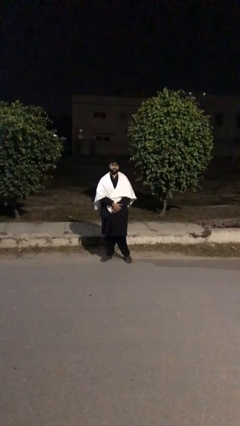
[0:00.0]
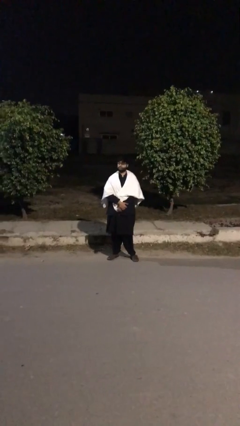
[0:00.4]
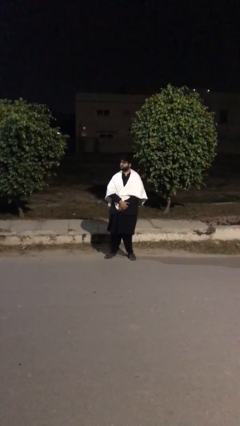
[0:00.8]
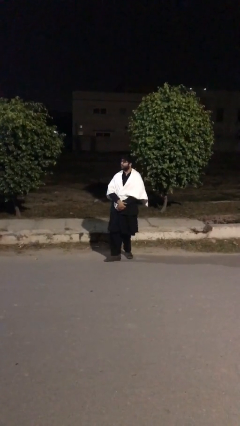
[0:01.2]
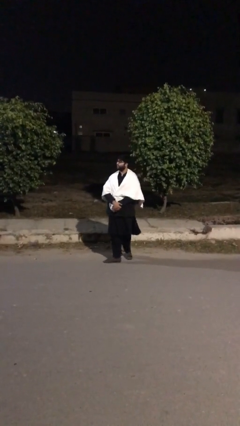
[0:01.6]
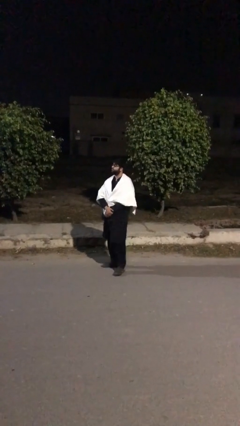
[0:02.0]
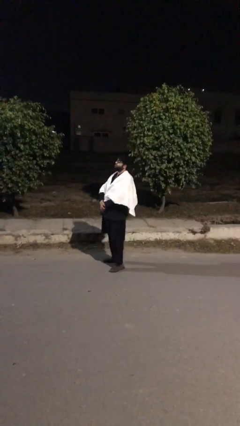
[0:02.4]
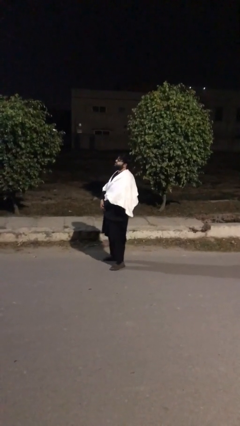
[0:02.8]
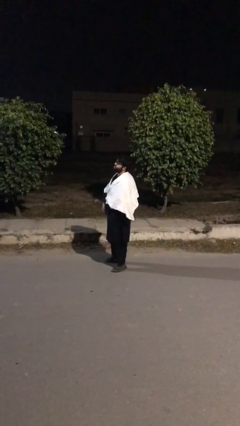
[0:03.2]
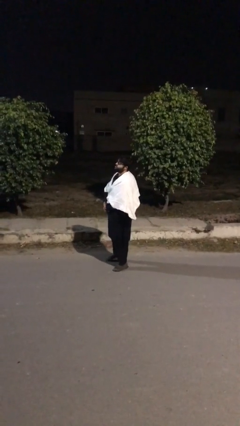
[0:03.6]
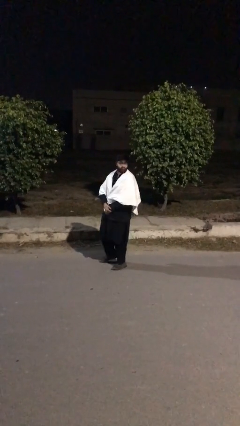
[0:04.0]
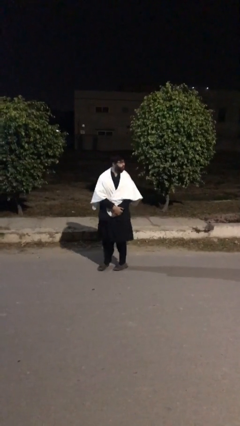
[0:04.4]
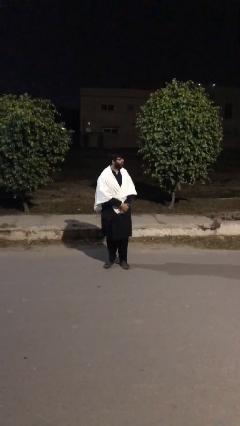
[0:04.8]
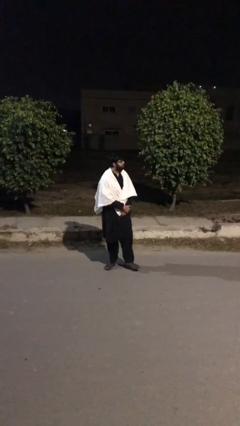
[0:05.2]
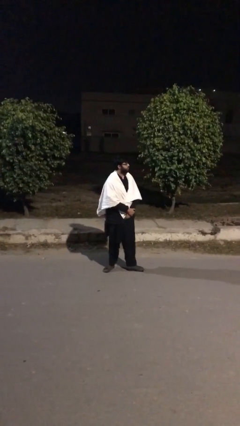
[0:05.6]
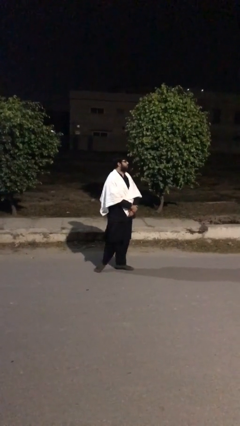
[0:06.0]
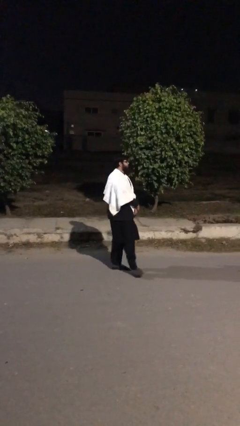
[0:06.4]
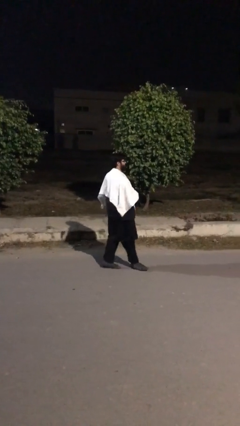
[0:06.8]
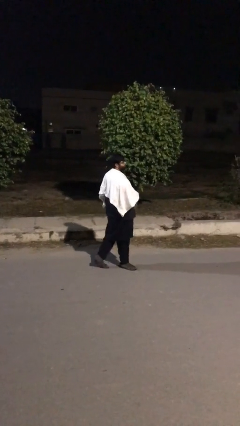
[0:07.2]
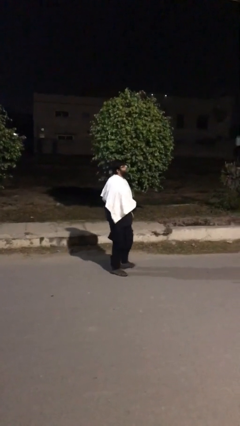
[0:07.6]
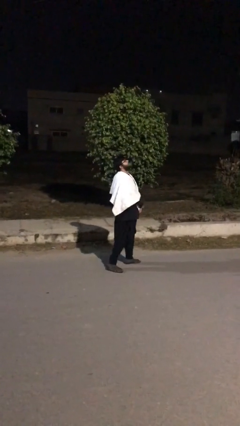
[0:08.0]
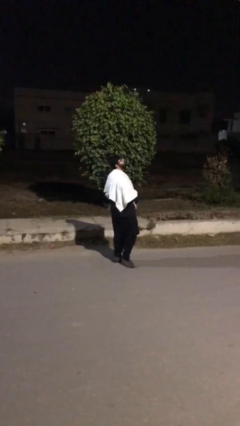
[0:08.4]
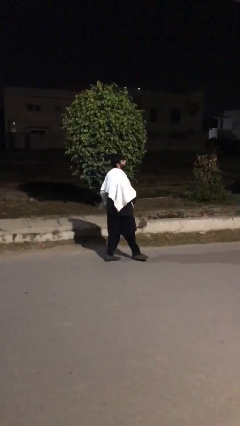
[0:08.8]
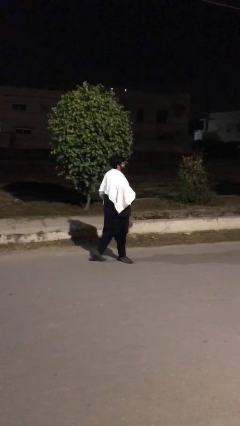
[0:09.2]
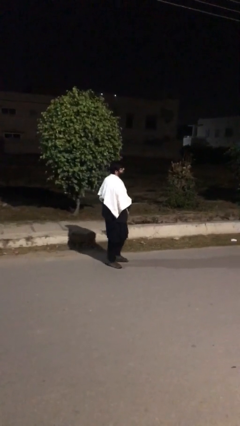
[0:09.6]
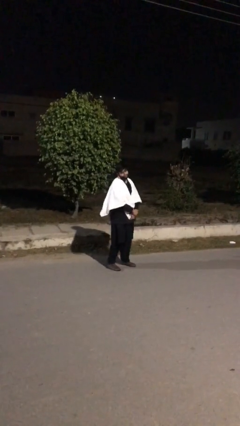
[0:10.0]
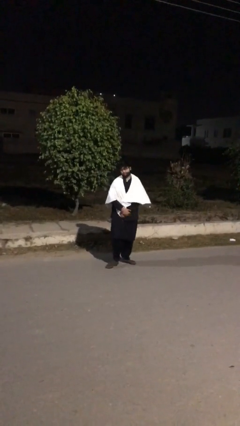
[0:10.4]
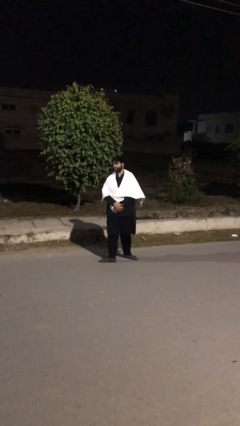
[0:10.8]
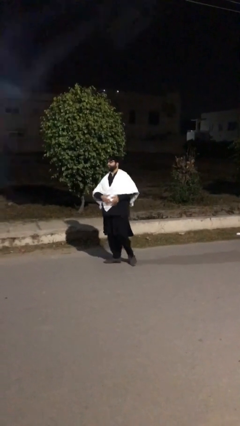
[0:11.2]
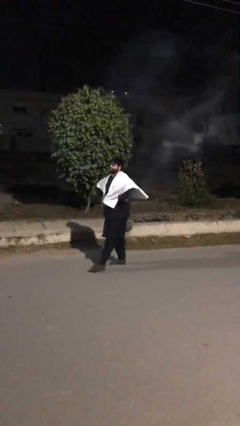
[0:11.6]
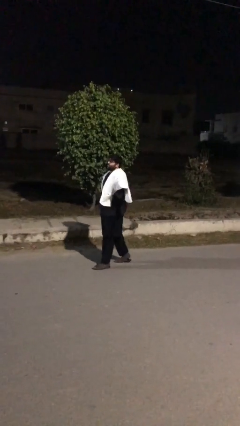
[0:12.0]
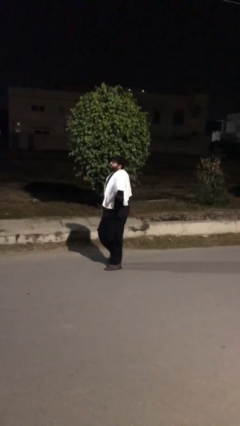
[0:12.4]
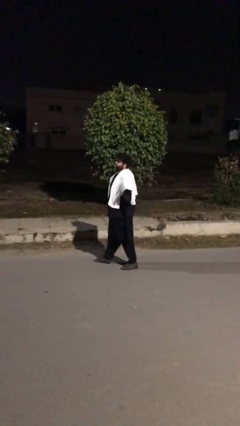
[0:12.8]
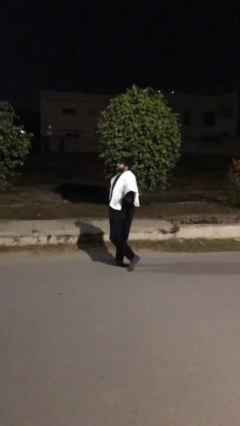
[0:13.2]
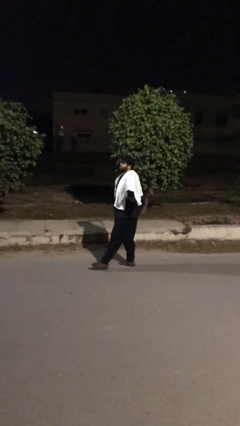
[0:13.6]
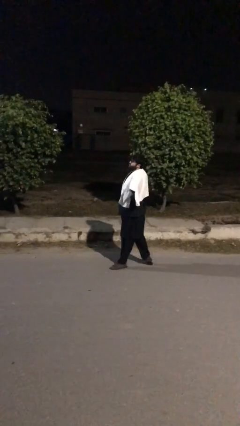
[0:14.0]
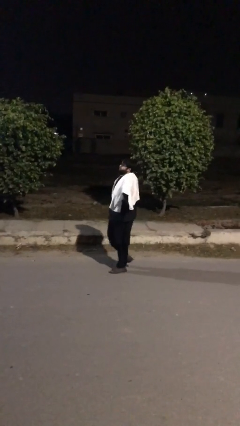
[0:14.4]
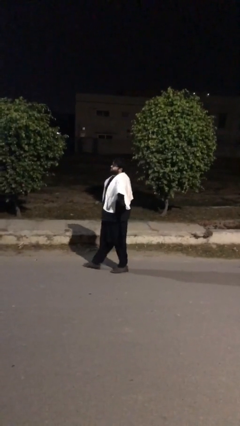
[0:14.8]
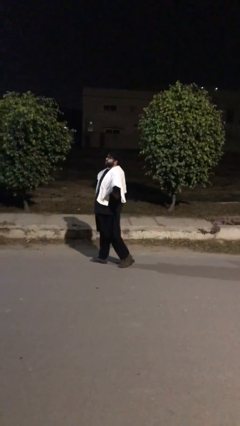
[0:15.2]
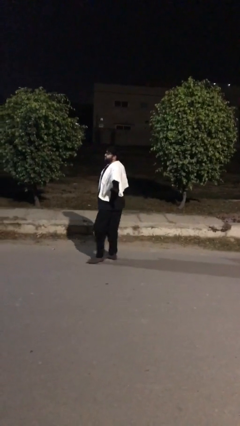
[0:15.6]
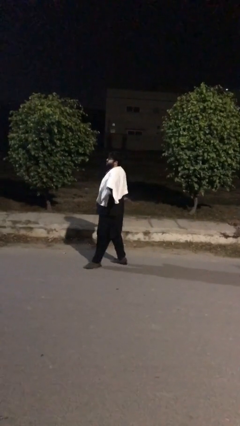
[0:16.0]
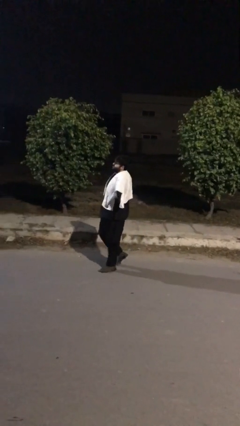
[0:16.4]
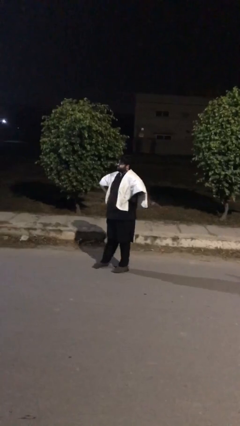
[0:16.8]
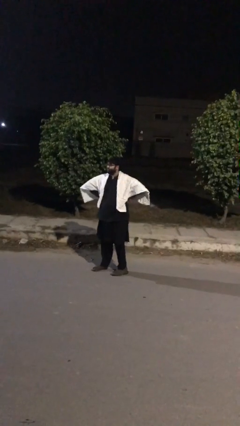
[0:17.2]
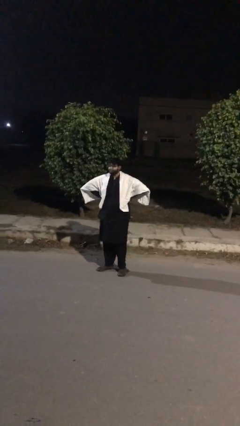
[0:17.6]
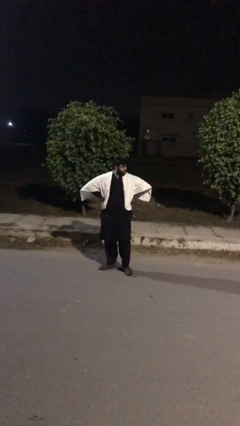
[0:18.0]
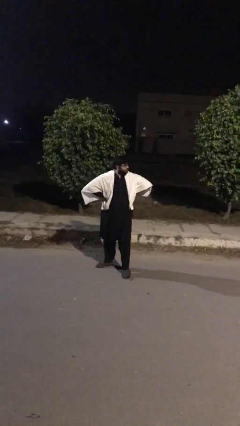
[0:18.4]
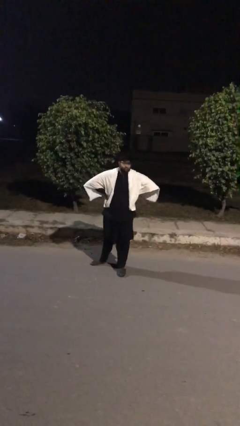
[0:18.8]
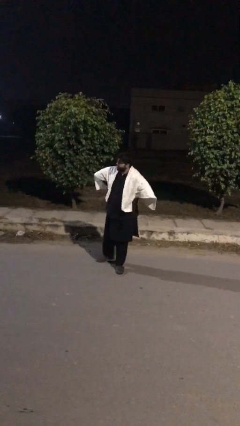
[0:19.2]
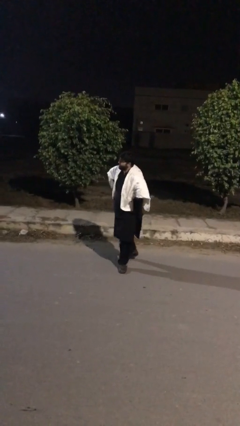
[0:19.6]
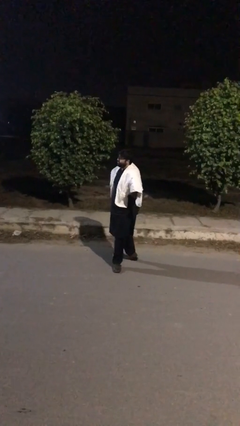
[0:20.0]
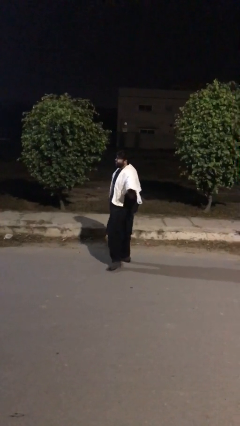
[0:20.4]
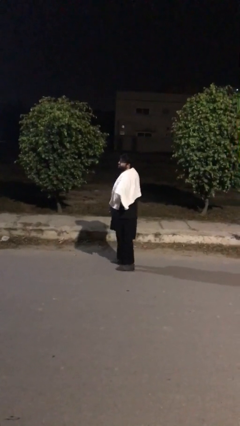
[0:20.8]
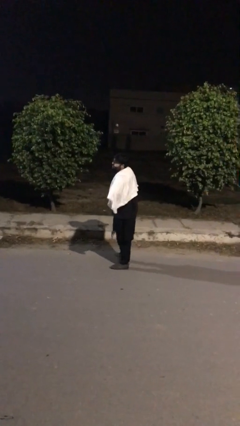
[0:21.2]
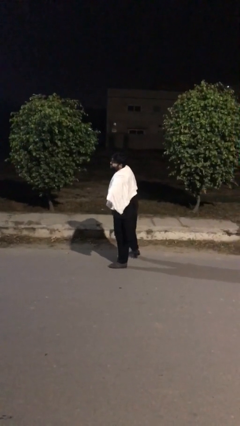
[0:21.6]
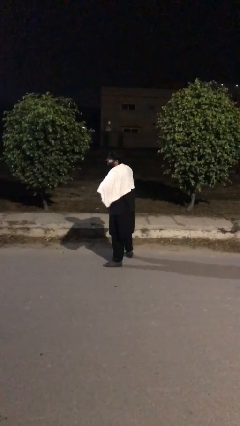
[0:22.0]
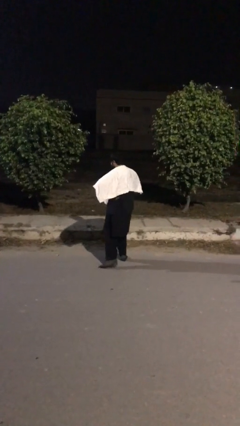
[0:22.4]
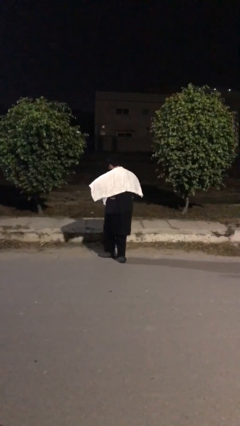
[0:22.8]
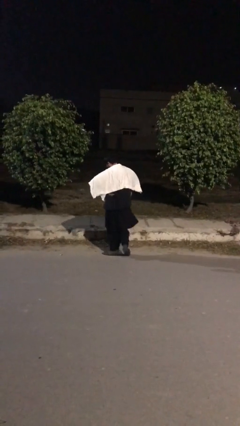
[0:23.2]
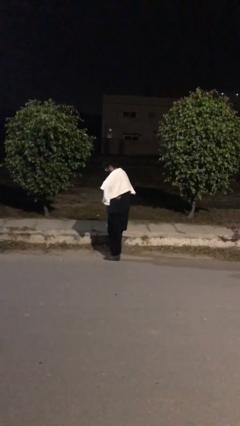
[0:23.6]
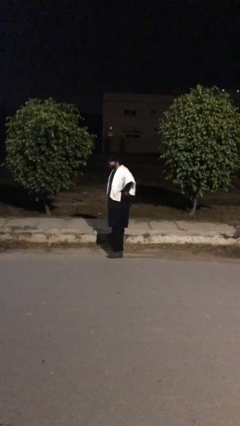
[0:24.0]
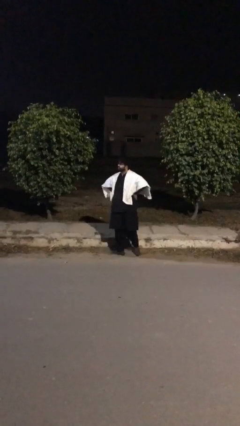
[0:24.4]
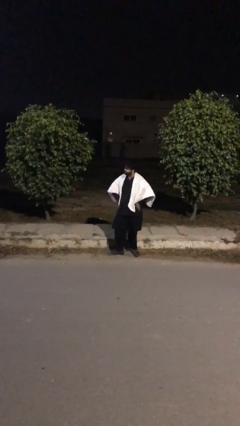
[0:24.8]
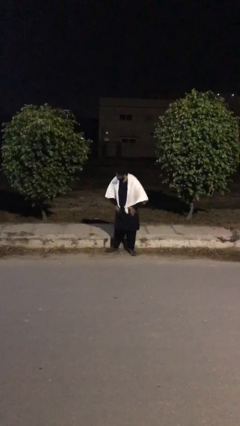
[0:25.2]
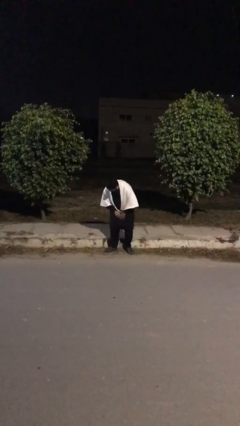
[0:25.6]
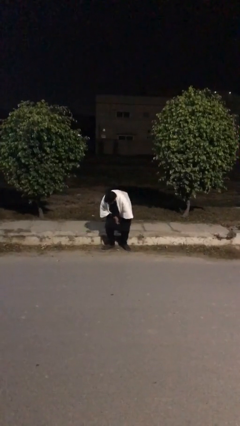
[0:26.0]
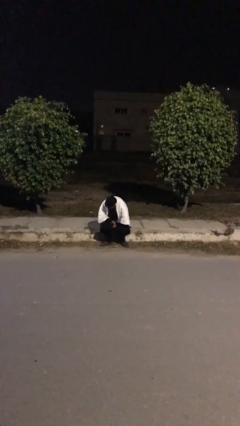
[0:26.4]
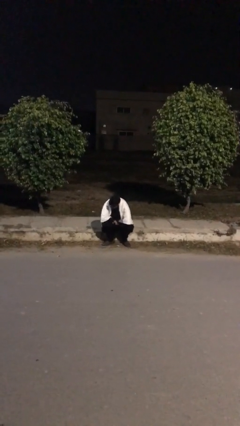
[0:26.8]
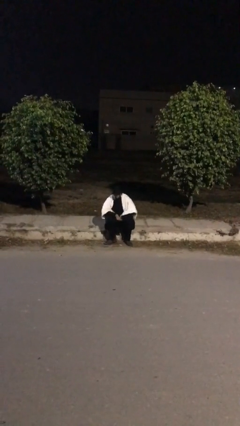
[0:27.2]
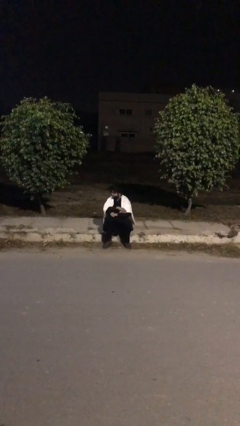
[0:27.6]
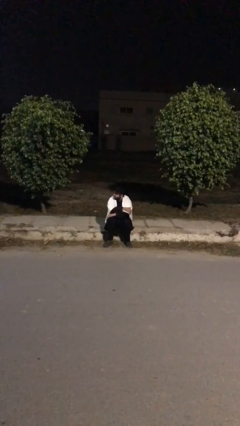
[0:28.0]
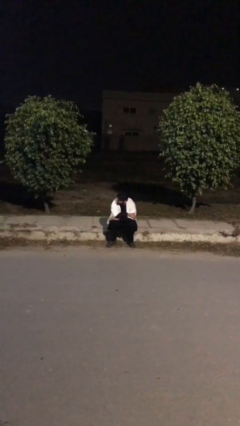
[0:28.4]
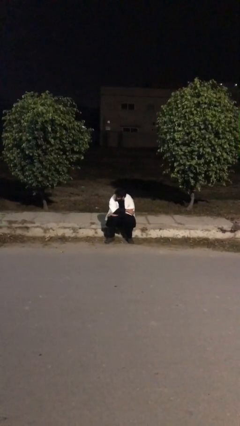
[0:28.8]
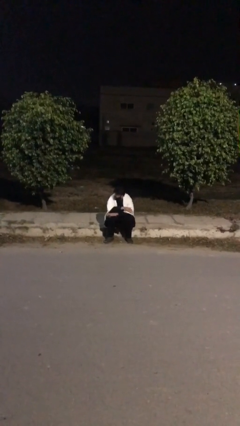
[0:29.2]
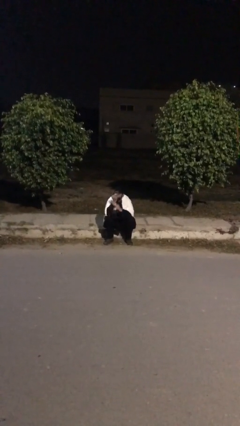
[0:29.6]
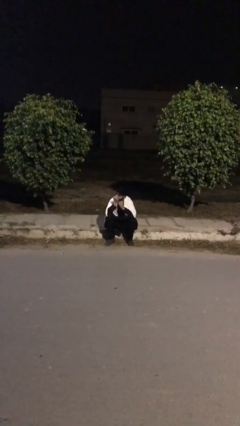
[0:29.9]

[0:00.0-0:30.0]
person walks

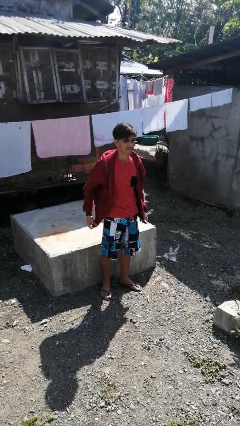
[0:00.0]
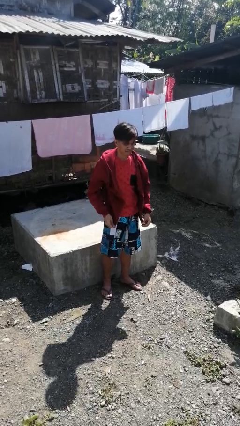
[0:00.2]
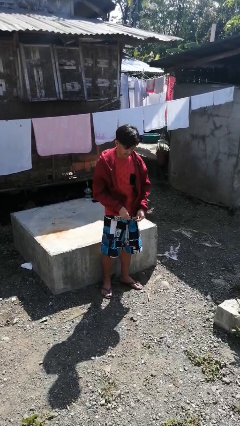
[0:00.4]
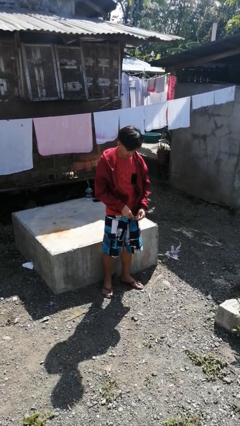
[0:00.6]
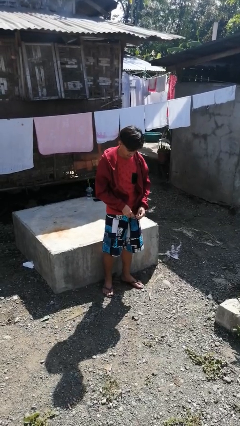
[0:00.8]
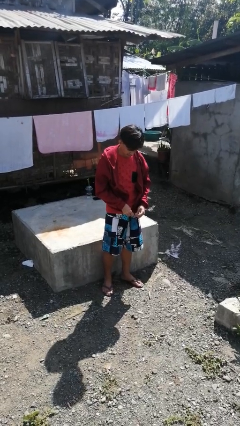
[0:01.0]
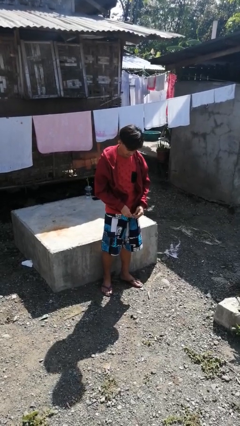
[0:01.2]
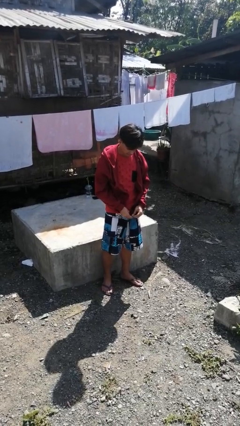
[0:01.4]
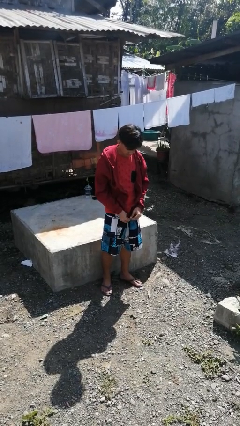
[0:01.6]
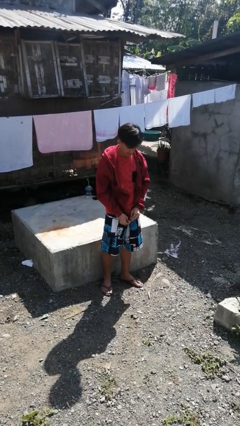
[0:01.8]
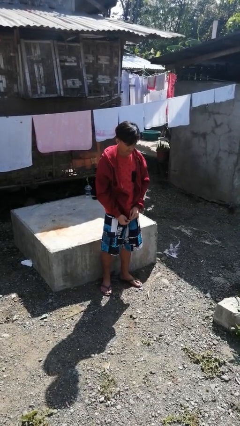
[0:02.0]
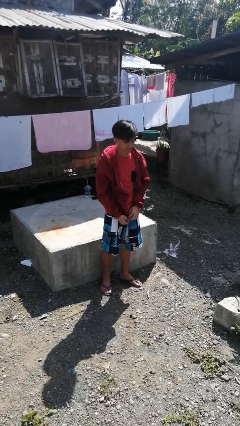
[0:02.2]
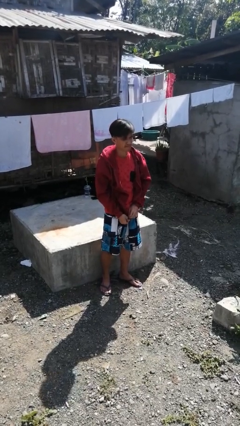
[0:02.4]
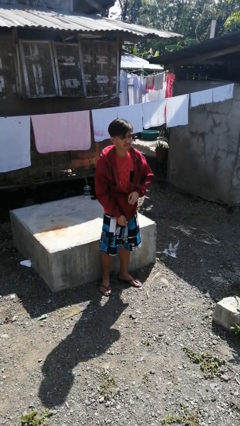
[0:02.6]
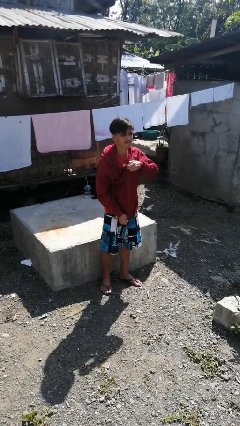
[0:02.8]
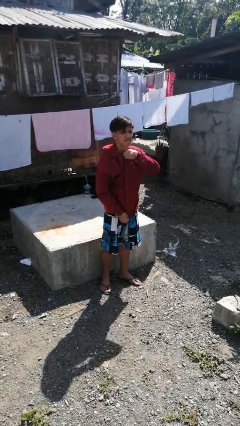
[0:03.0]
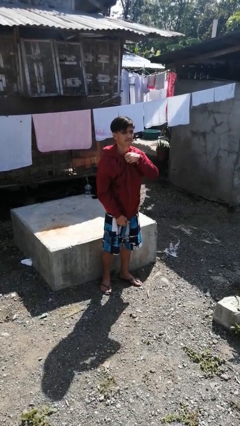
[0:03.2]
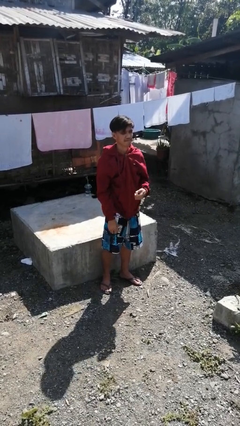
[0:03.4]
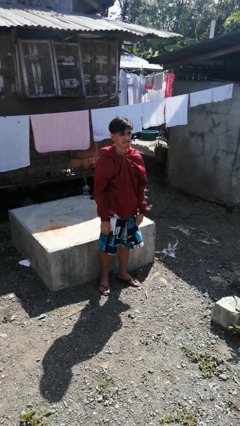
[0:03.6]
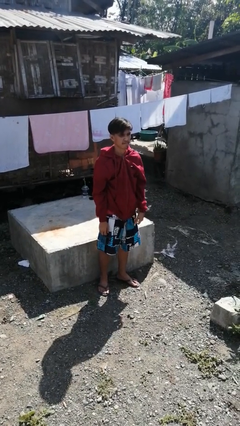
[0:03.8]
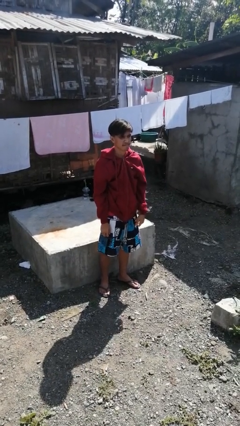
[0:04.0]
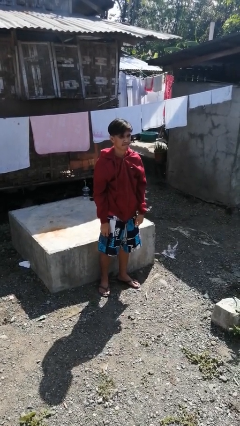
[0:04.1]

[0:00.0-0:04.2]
person zips up jacket
